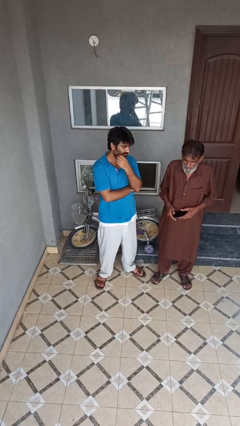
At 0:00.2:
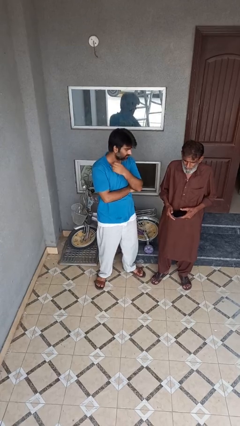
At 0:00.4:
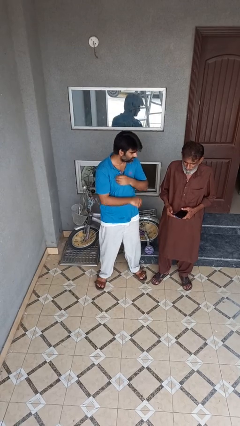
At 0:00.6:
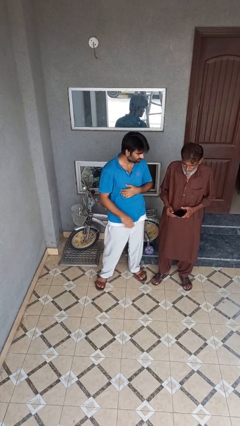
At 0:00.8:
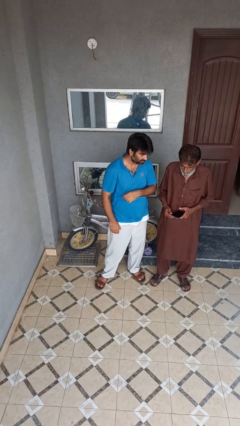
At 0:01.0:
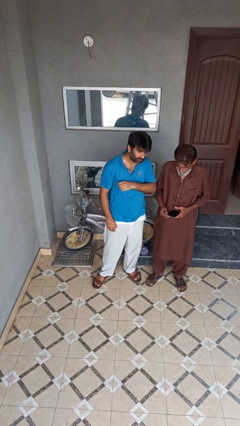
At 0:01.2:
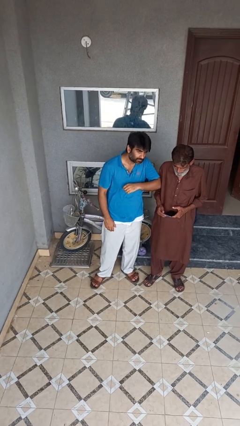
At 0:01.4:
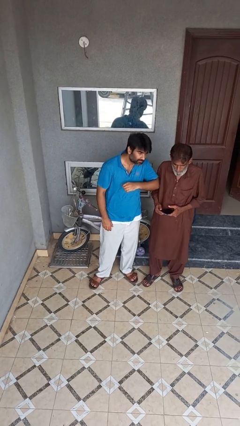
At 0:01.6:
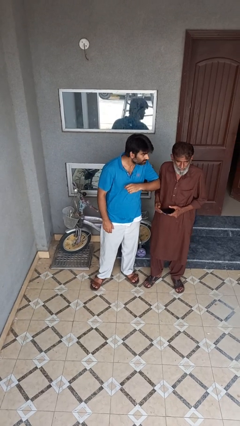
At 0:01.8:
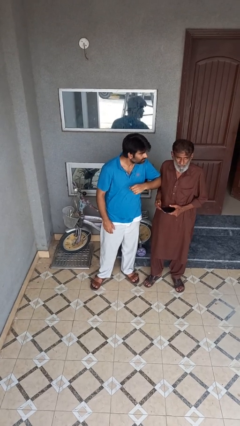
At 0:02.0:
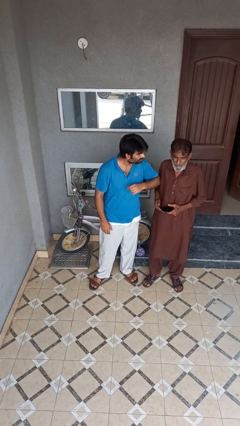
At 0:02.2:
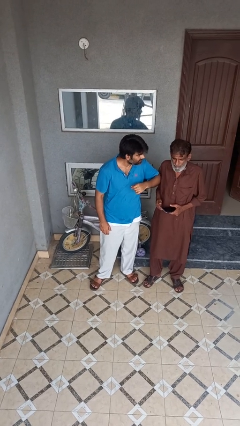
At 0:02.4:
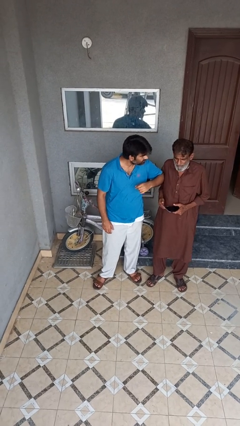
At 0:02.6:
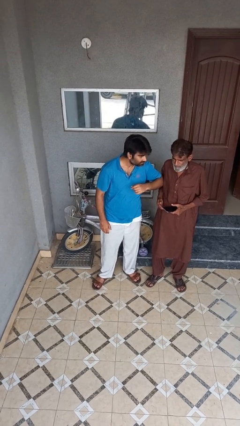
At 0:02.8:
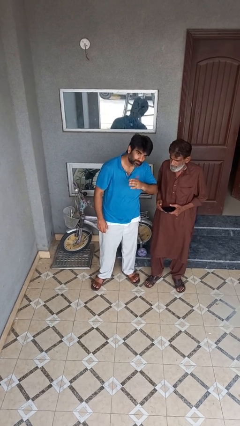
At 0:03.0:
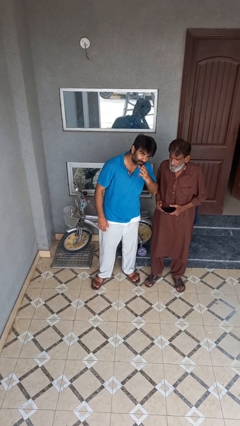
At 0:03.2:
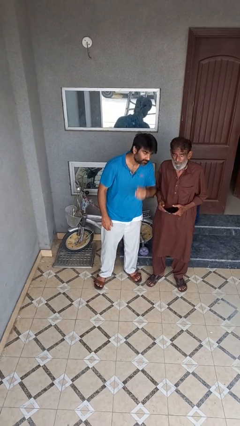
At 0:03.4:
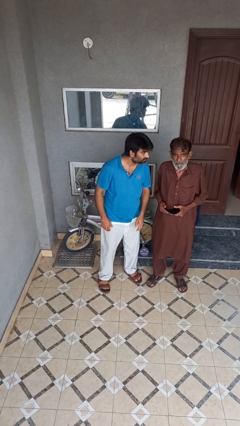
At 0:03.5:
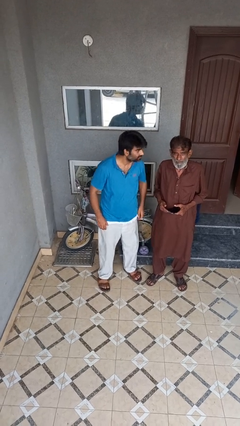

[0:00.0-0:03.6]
person kisses cheek of person

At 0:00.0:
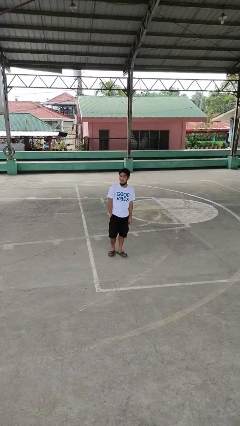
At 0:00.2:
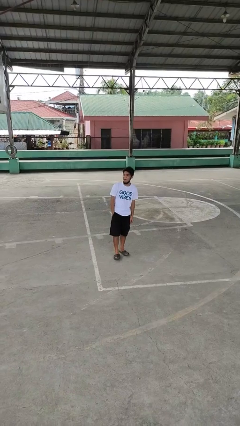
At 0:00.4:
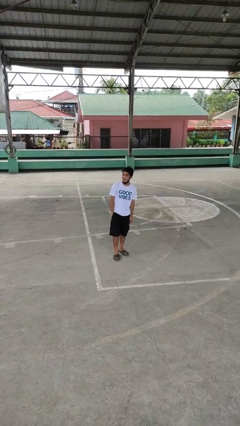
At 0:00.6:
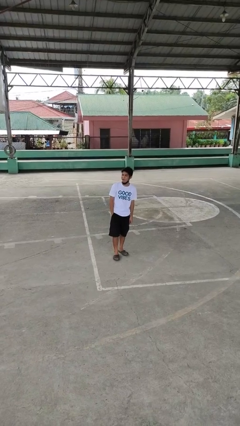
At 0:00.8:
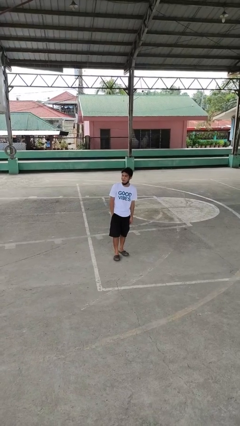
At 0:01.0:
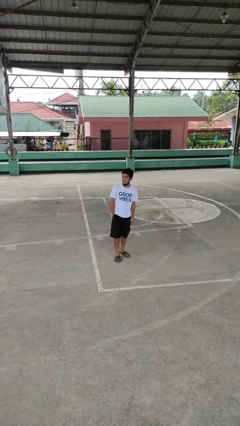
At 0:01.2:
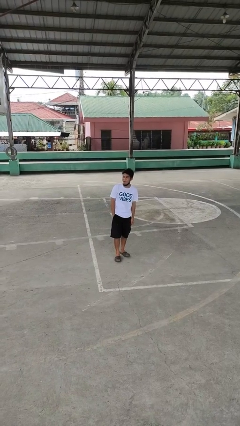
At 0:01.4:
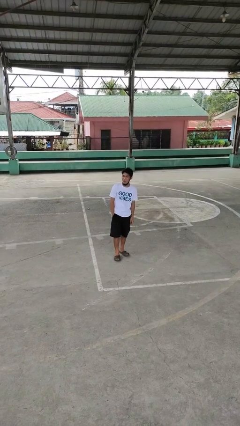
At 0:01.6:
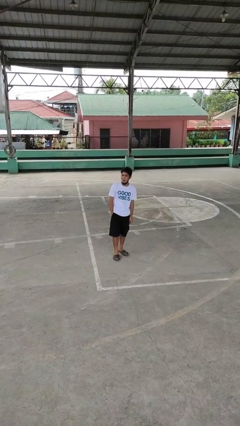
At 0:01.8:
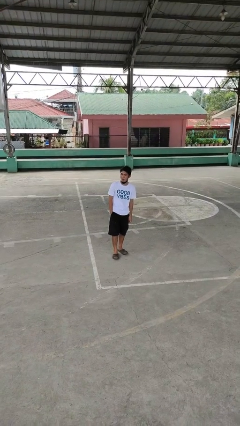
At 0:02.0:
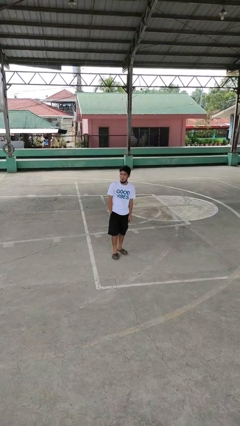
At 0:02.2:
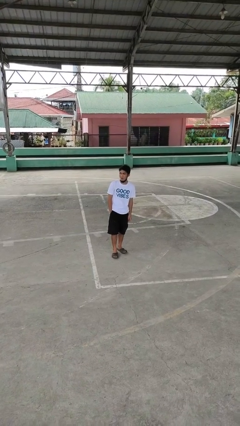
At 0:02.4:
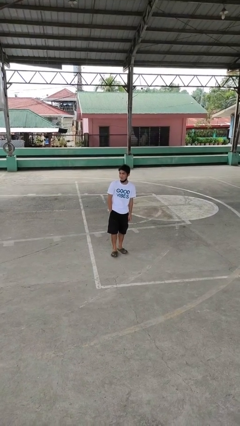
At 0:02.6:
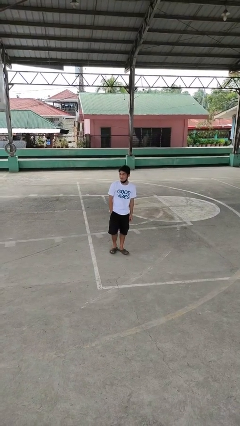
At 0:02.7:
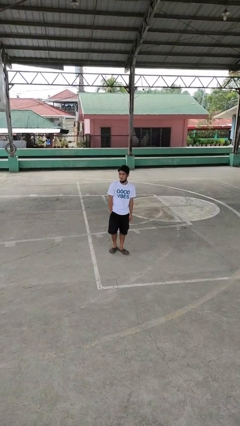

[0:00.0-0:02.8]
person sticks out tongue

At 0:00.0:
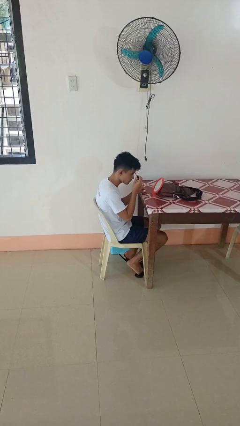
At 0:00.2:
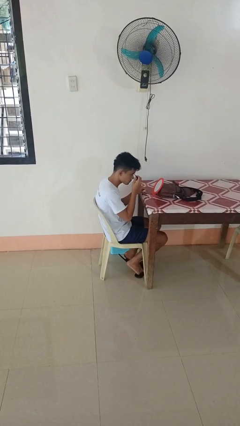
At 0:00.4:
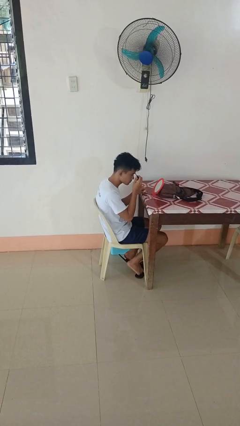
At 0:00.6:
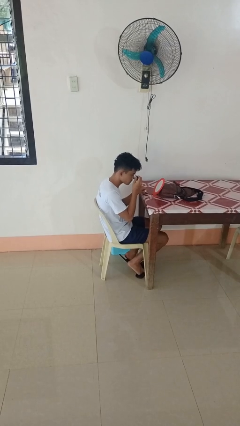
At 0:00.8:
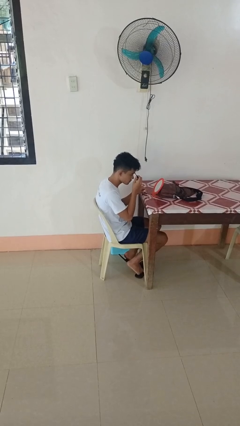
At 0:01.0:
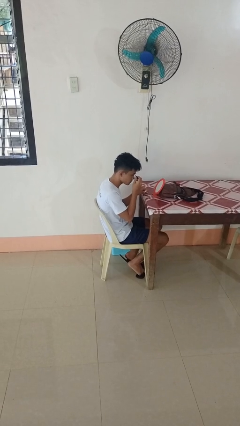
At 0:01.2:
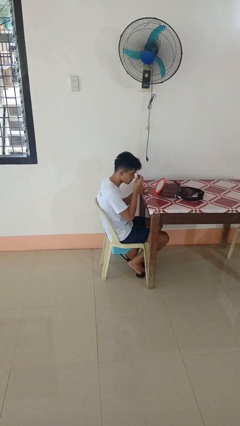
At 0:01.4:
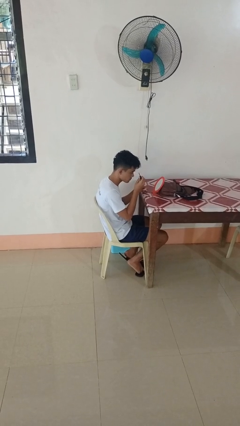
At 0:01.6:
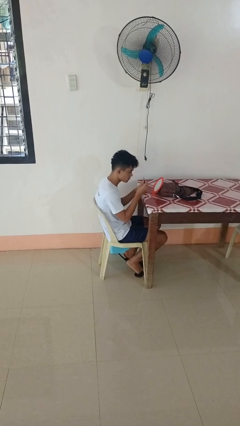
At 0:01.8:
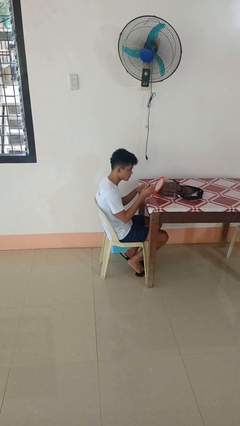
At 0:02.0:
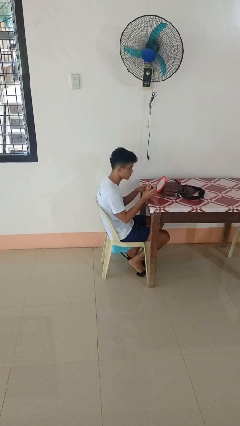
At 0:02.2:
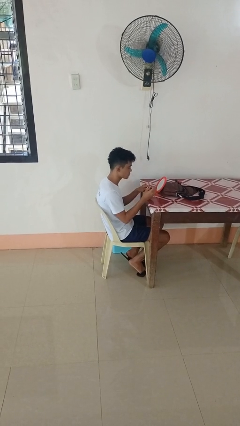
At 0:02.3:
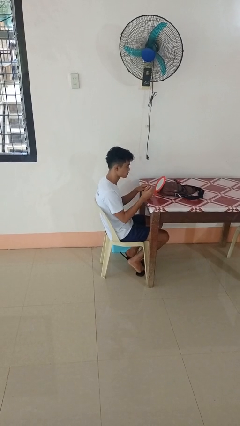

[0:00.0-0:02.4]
person applies eye makeup

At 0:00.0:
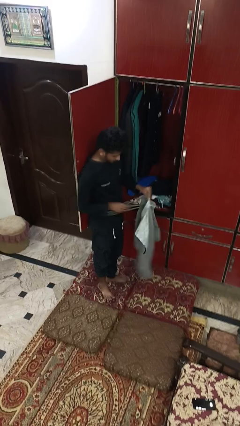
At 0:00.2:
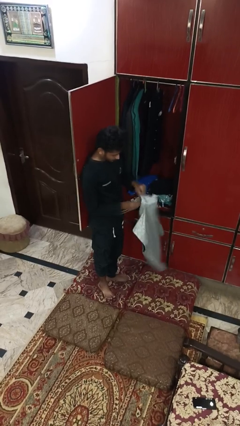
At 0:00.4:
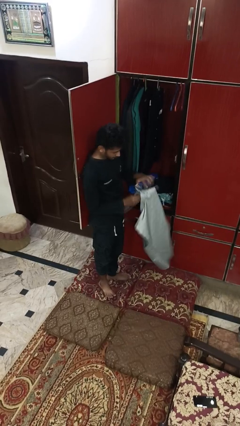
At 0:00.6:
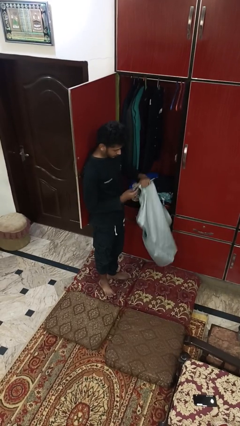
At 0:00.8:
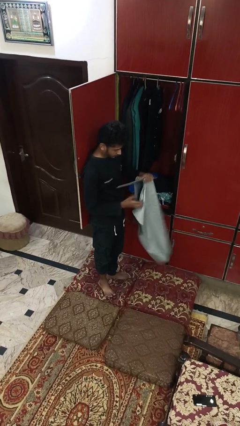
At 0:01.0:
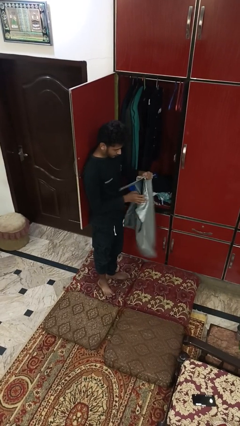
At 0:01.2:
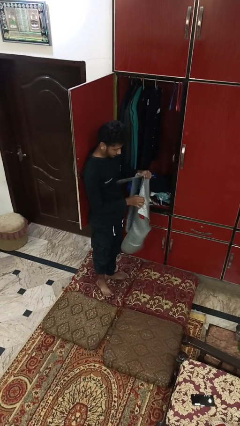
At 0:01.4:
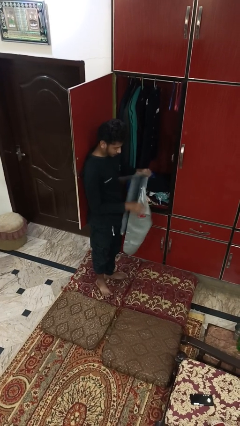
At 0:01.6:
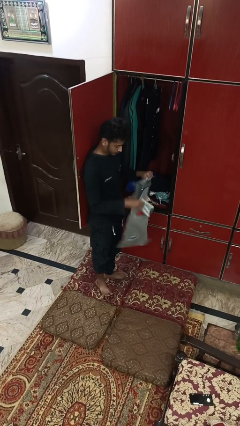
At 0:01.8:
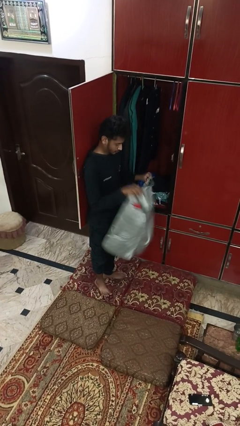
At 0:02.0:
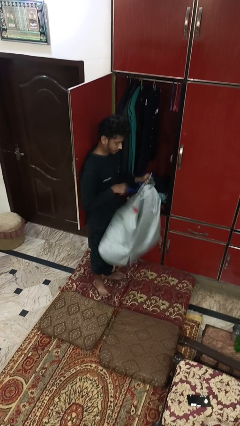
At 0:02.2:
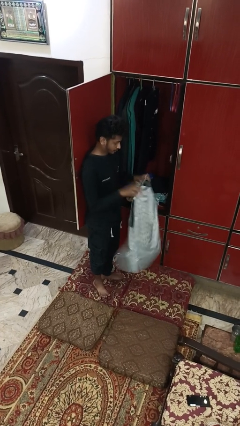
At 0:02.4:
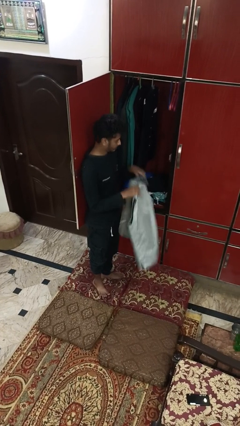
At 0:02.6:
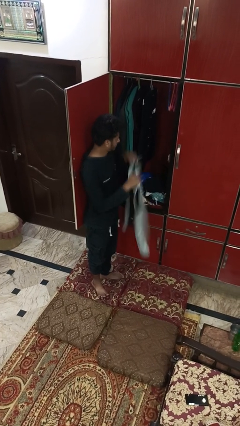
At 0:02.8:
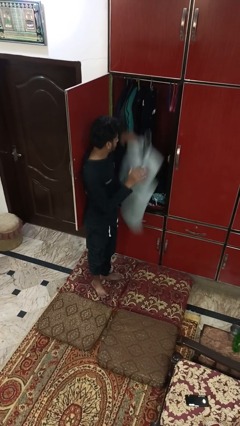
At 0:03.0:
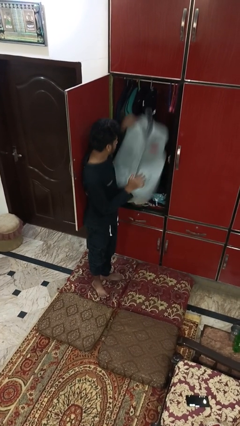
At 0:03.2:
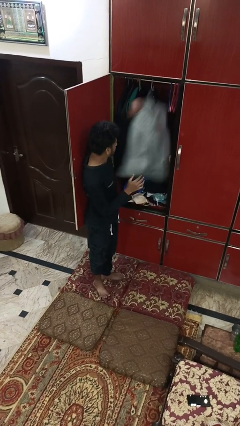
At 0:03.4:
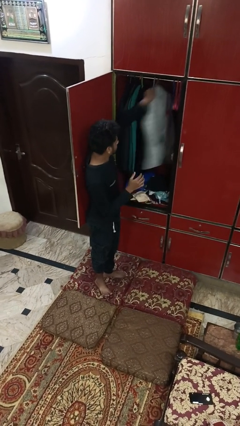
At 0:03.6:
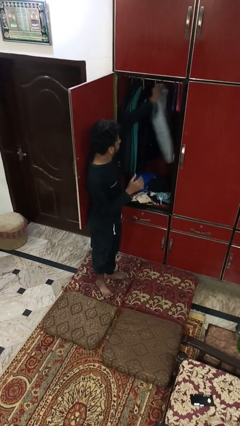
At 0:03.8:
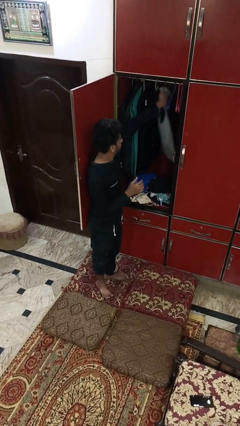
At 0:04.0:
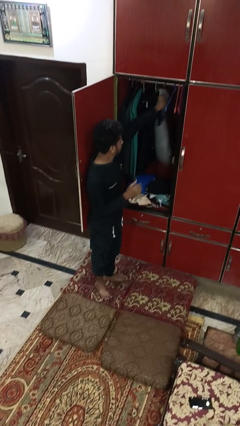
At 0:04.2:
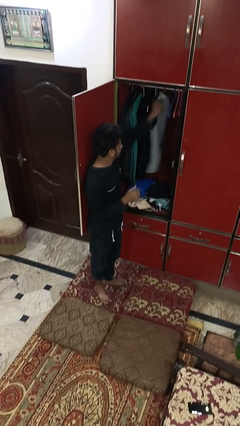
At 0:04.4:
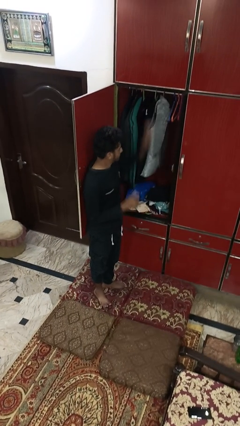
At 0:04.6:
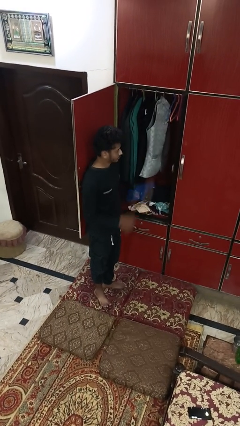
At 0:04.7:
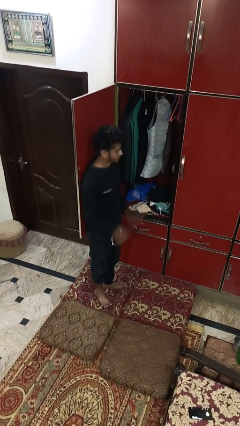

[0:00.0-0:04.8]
person puts clothes into closet

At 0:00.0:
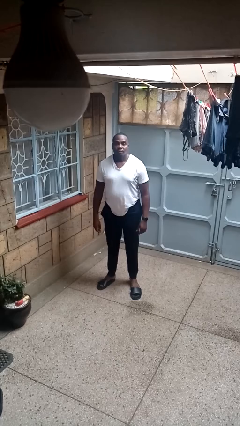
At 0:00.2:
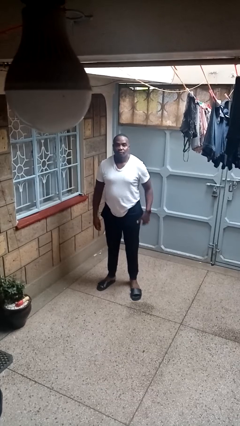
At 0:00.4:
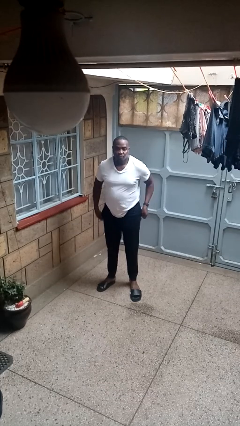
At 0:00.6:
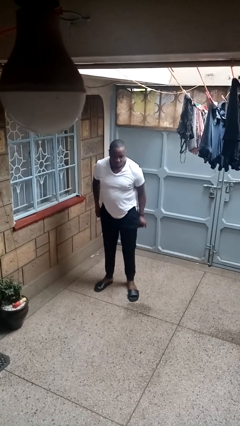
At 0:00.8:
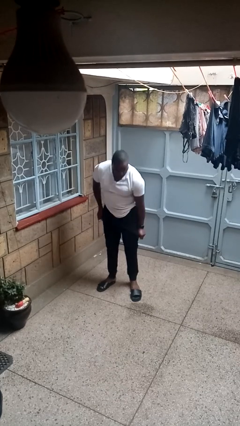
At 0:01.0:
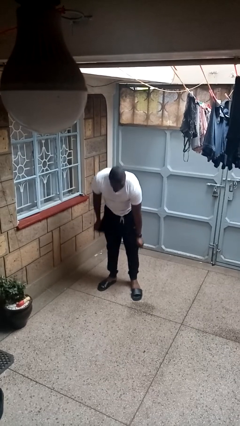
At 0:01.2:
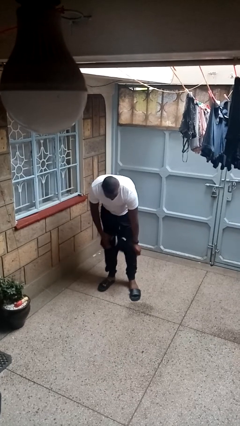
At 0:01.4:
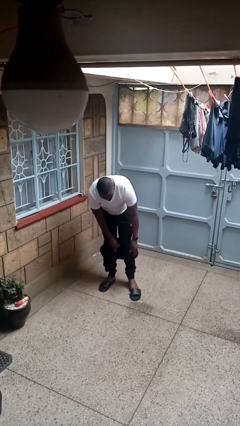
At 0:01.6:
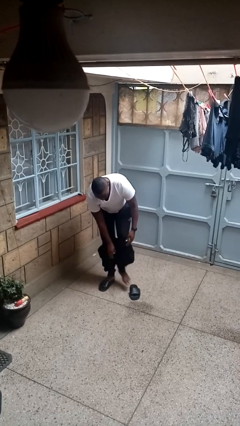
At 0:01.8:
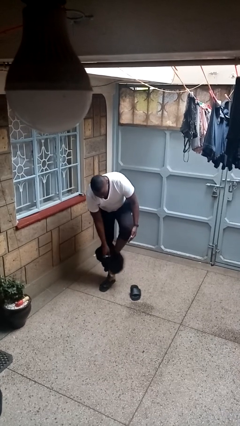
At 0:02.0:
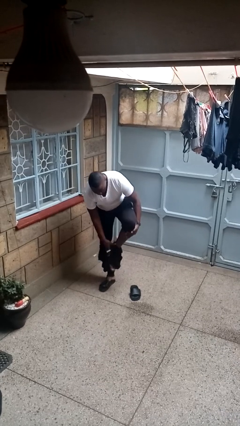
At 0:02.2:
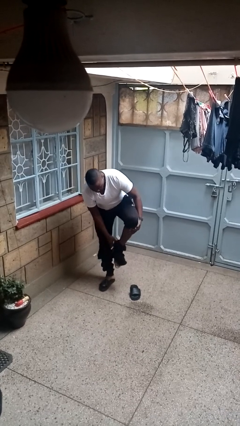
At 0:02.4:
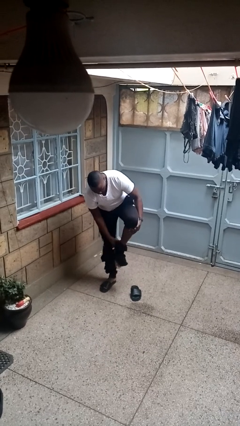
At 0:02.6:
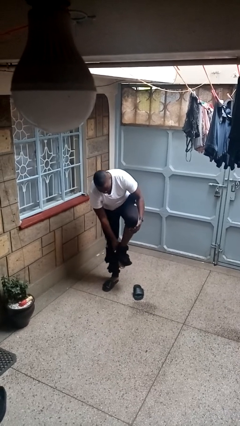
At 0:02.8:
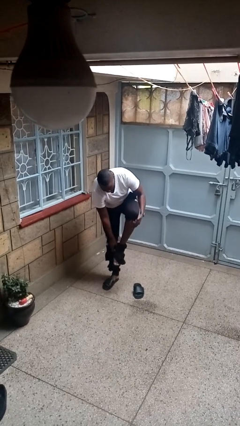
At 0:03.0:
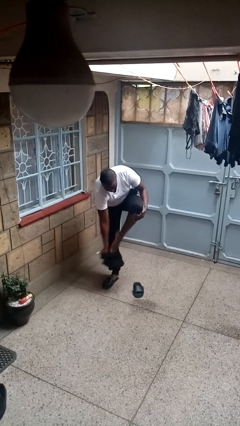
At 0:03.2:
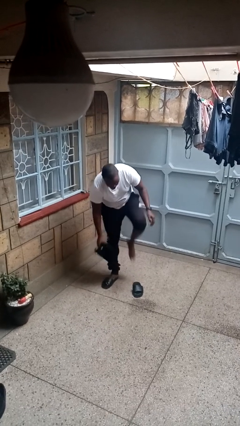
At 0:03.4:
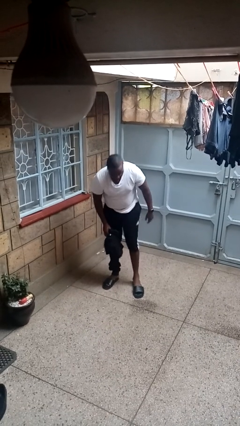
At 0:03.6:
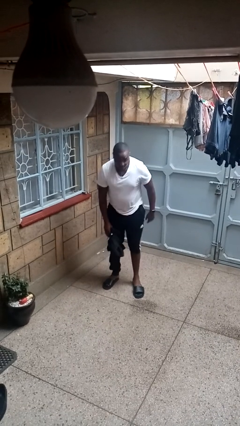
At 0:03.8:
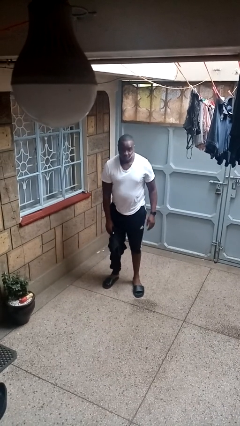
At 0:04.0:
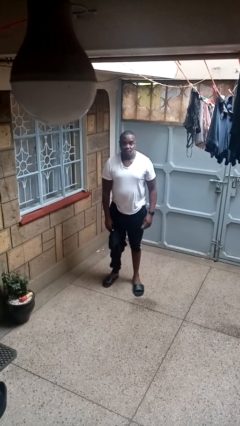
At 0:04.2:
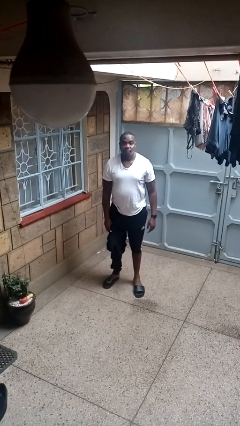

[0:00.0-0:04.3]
person takes off pants
